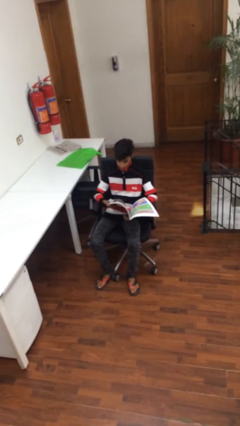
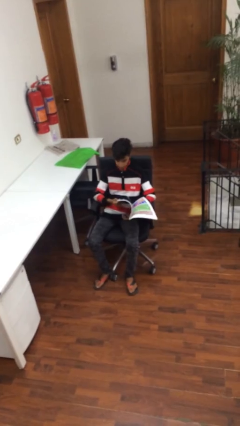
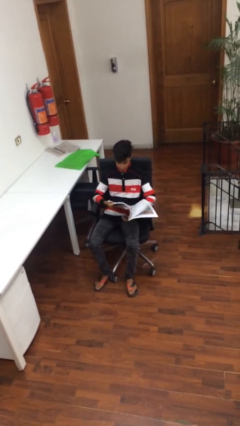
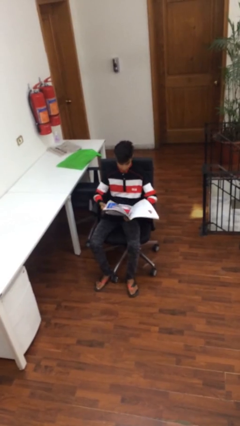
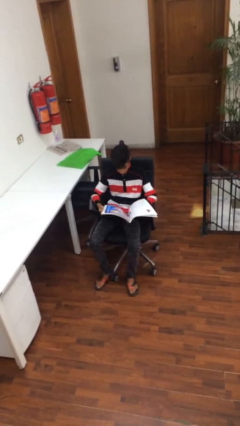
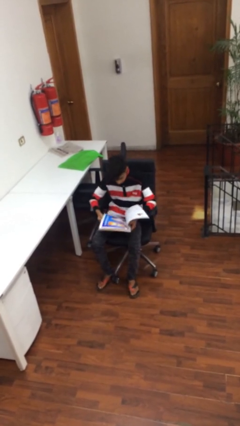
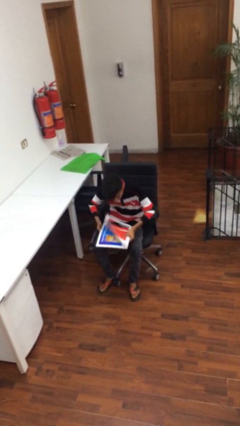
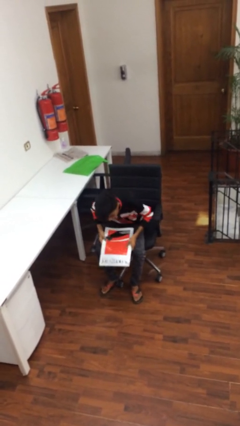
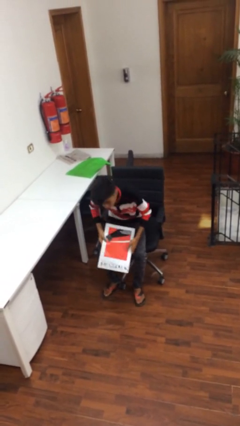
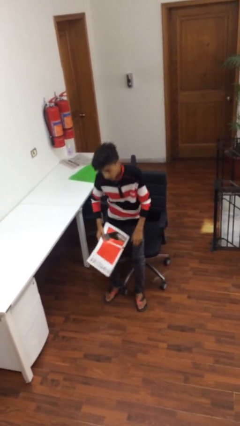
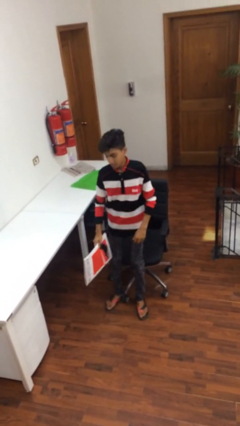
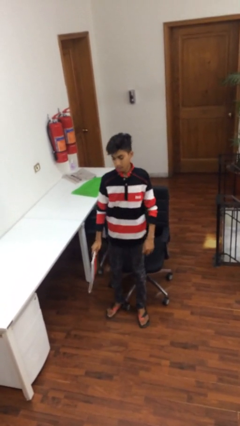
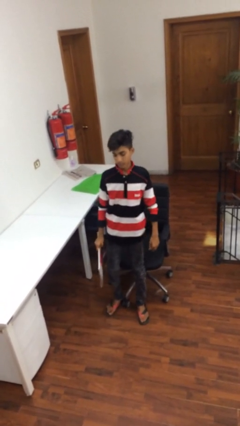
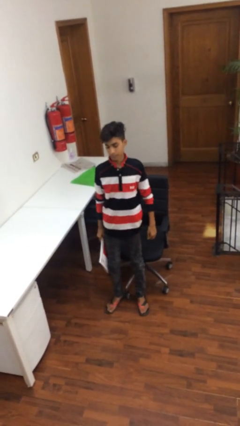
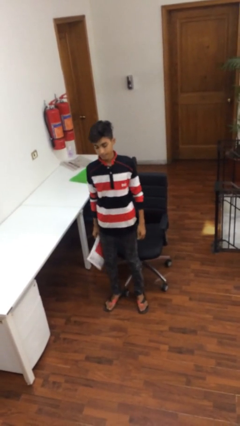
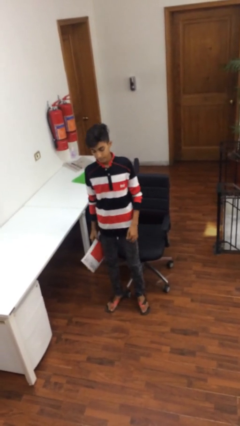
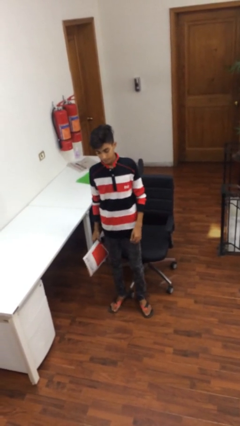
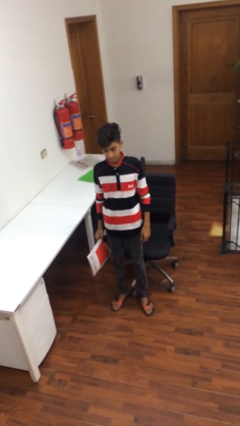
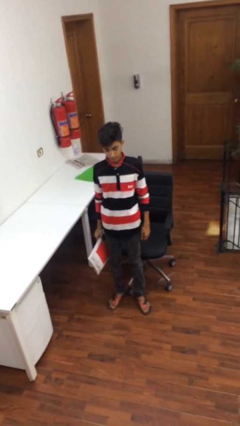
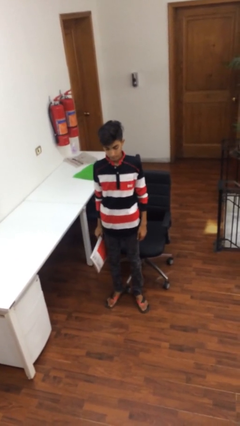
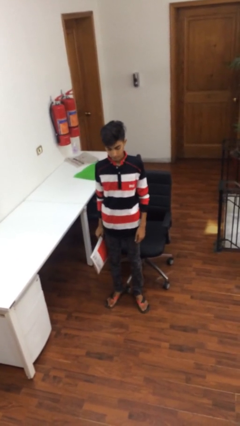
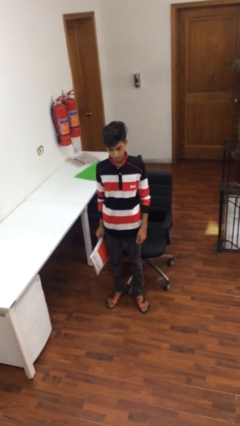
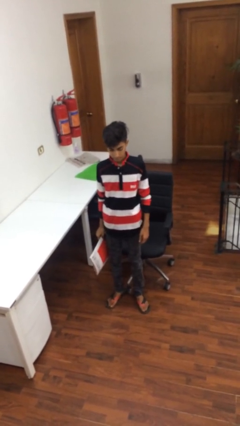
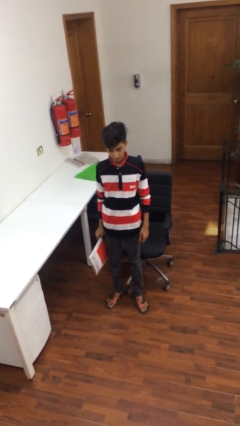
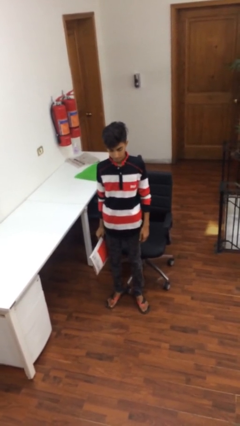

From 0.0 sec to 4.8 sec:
person stands up

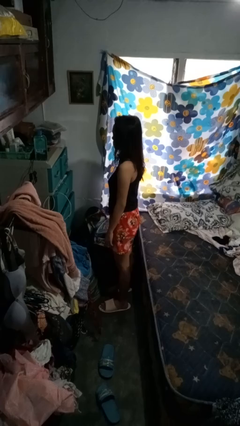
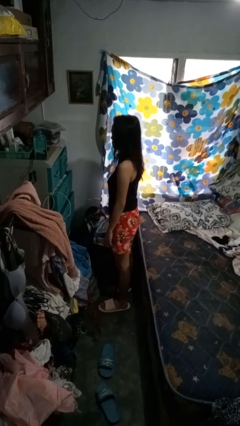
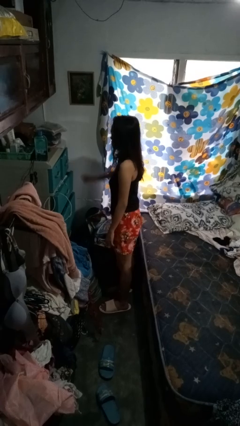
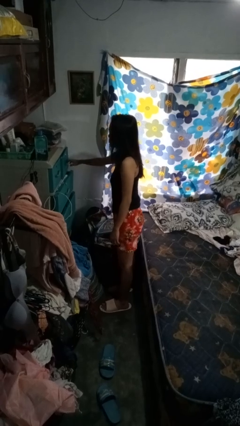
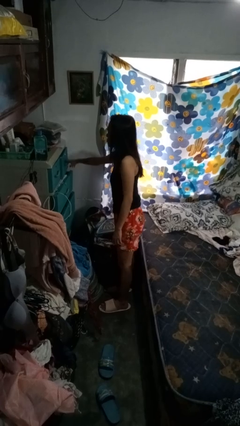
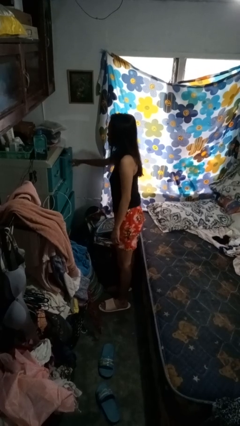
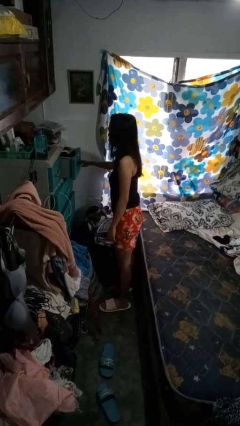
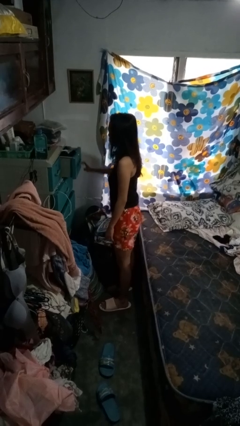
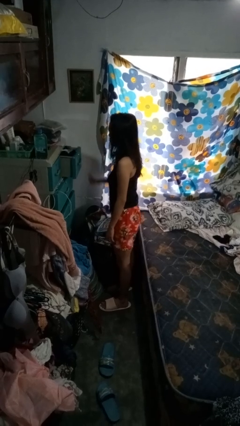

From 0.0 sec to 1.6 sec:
person opens dresser drawer

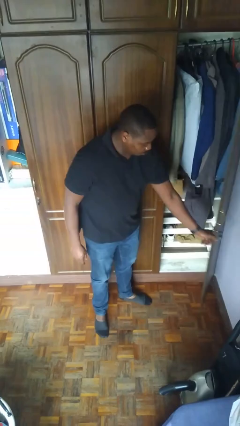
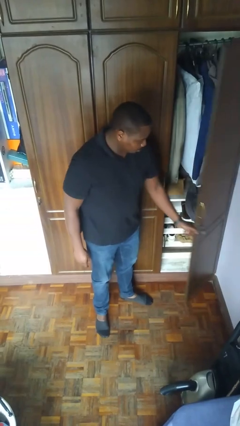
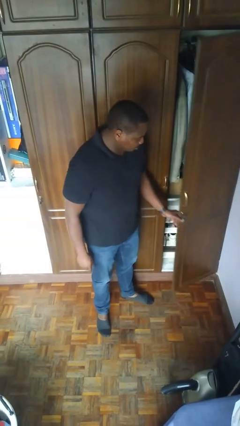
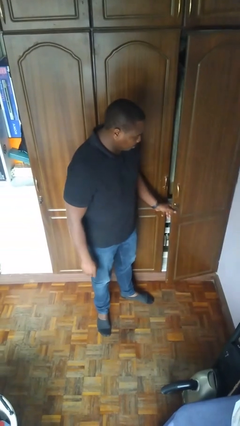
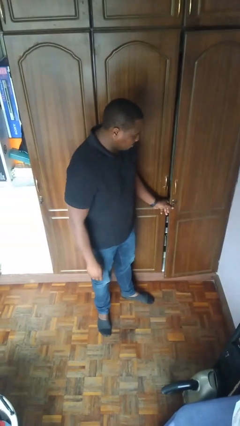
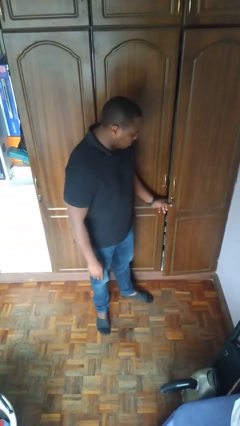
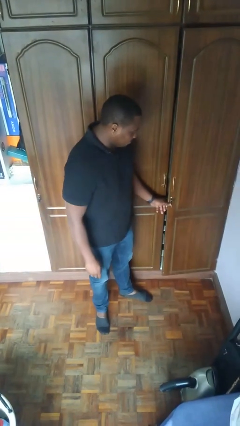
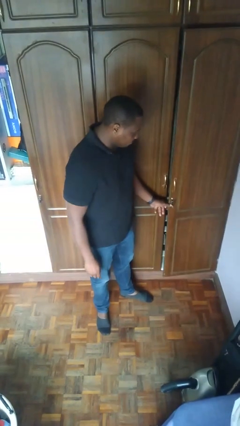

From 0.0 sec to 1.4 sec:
person closes closet door

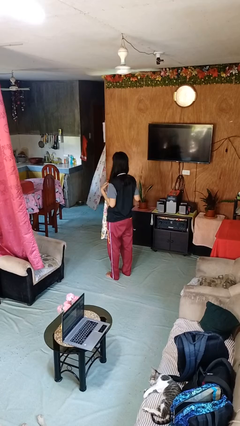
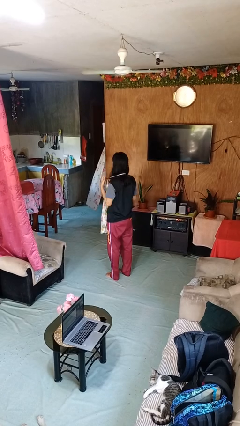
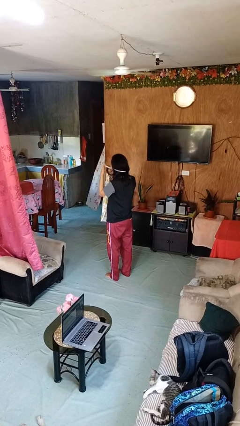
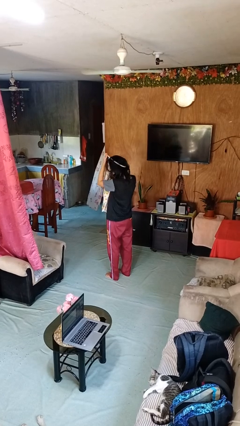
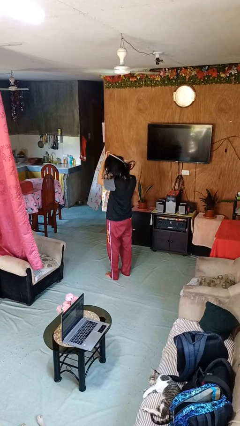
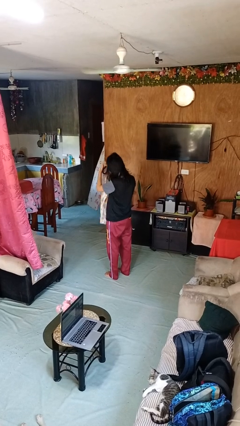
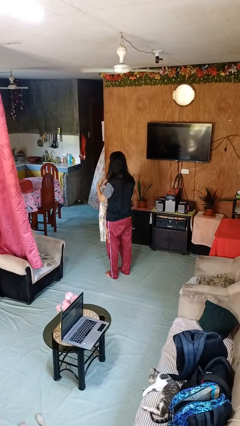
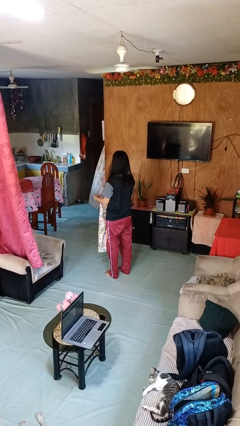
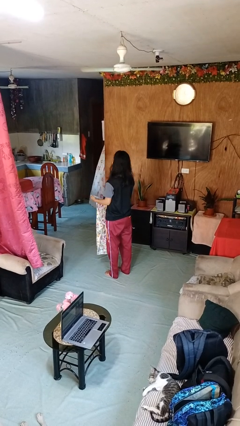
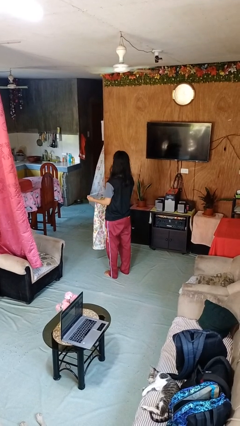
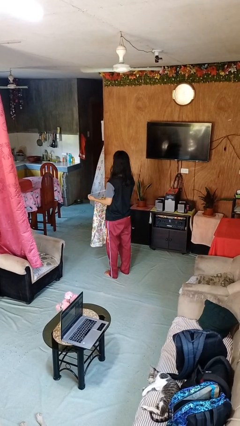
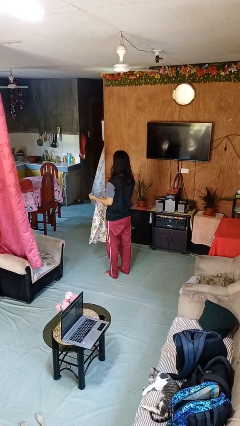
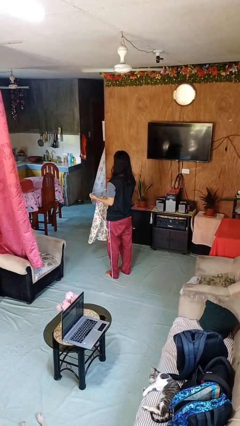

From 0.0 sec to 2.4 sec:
person takes off apron

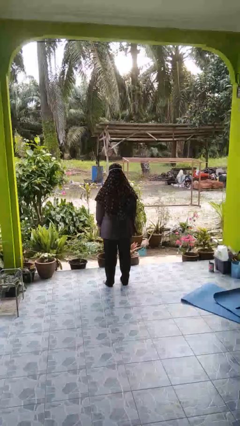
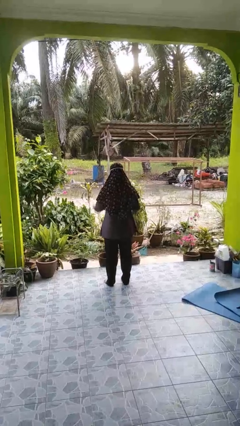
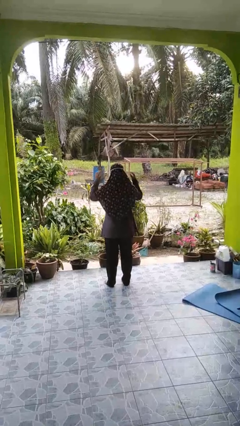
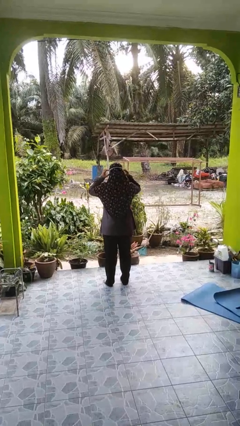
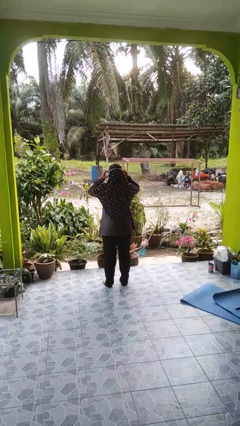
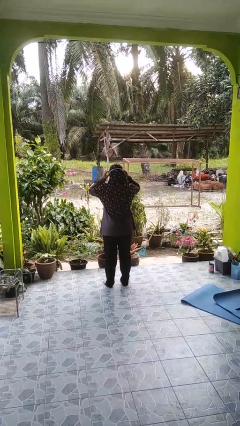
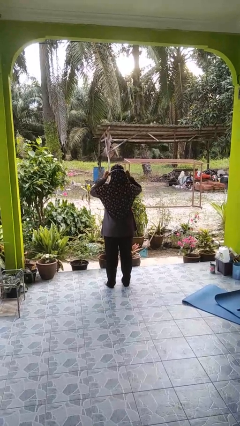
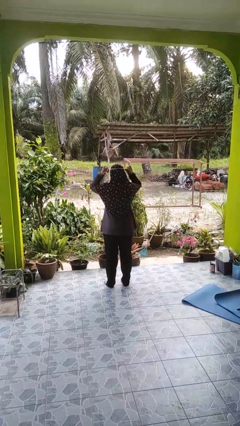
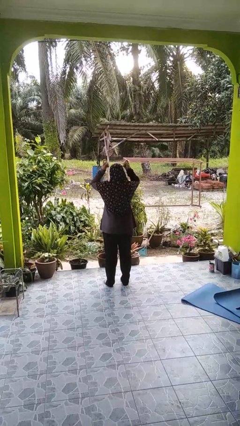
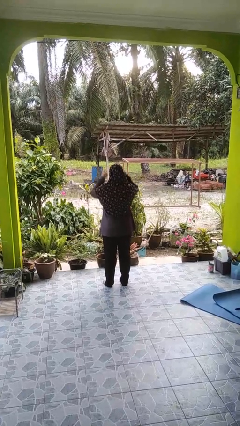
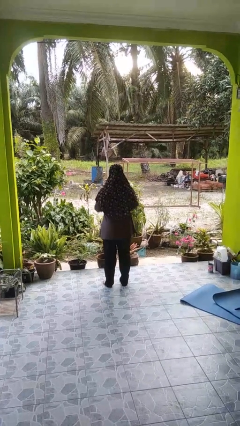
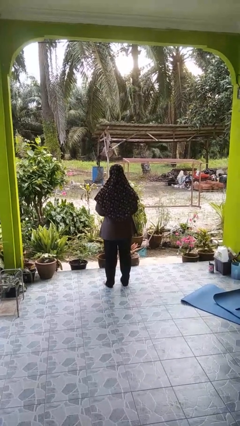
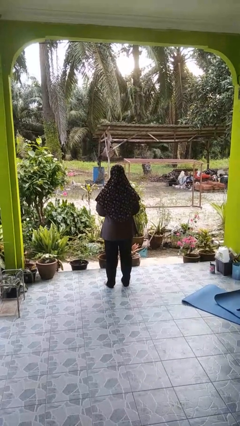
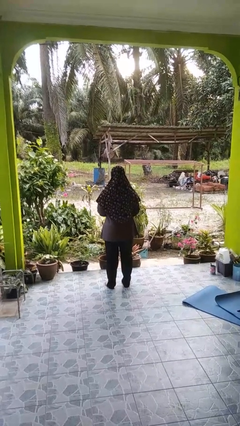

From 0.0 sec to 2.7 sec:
person takes off facemask

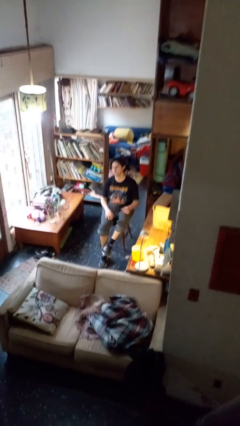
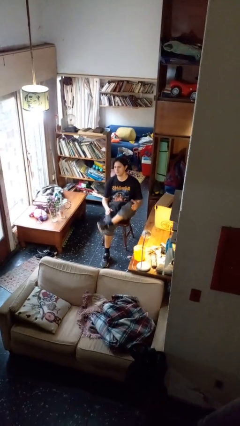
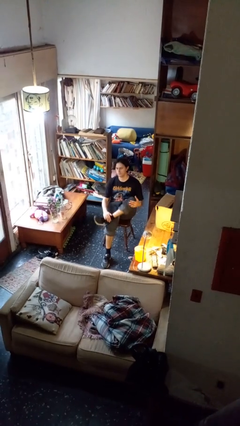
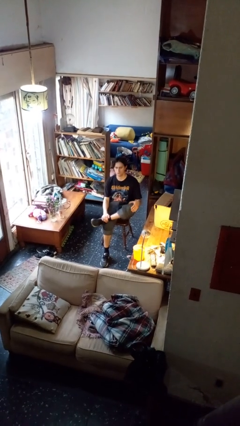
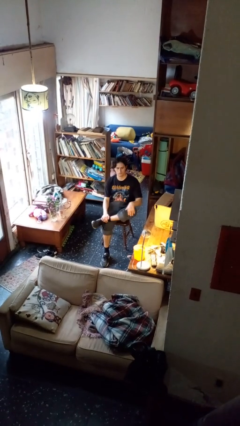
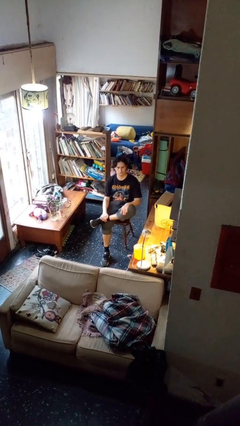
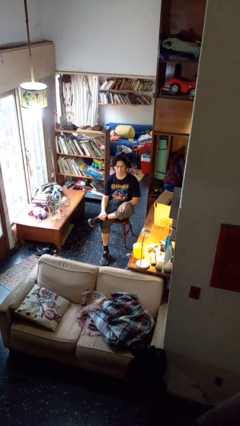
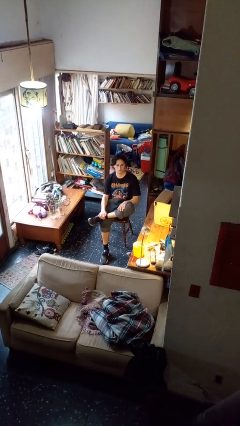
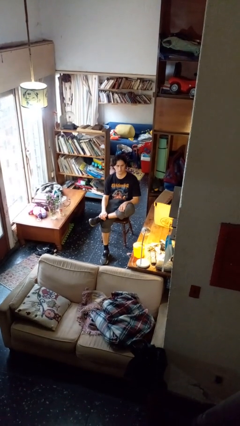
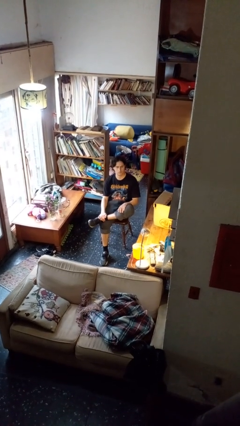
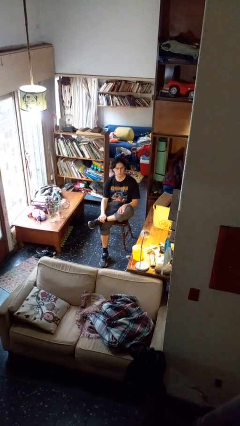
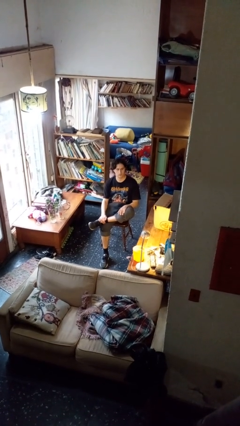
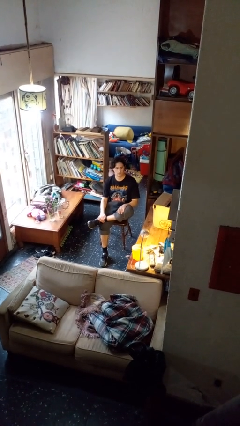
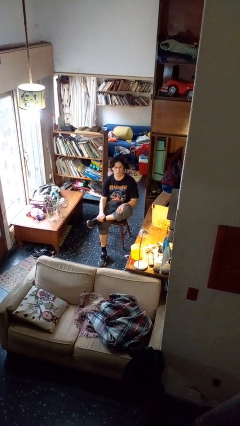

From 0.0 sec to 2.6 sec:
person crosses legs

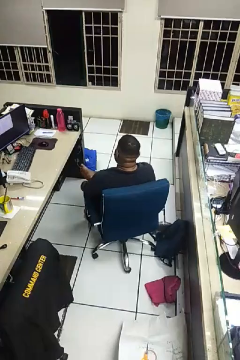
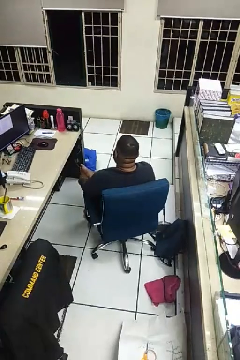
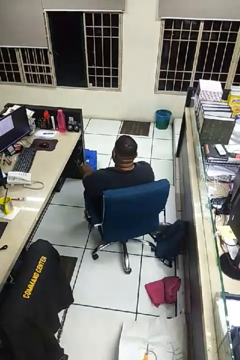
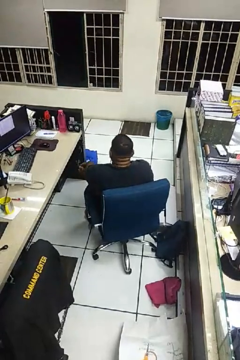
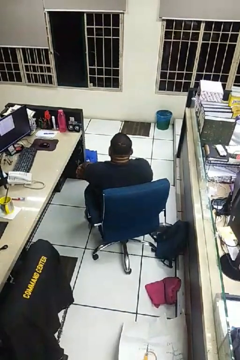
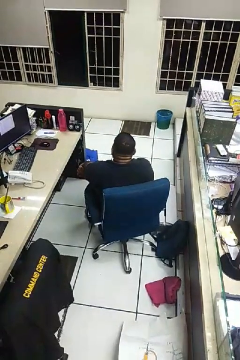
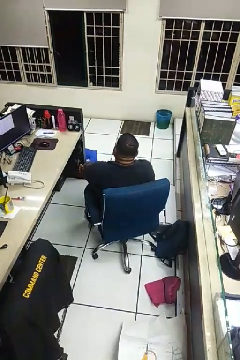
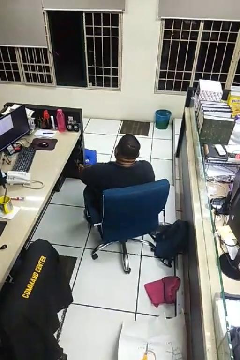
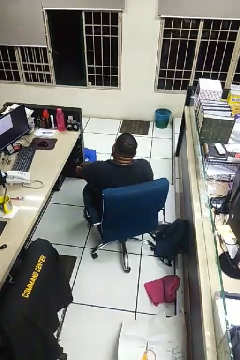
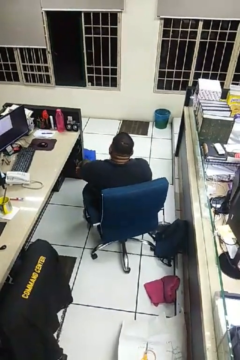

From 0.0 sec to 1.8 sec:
person rubs foot

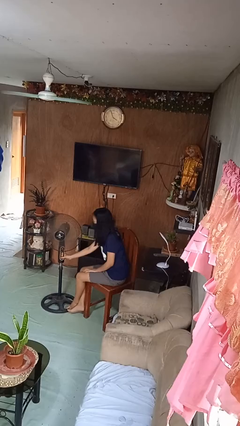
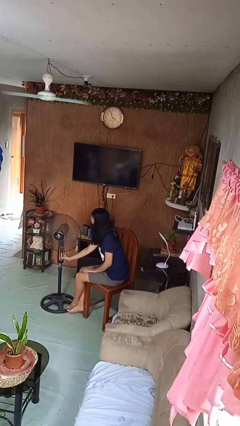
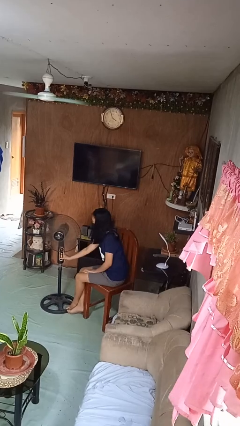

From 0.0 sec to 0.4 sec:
person turns off fan
